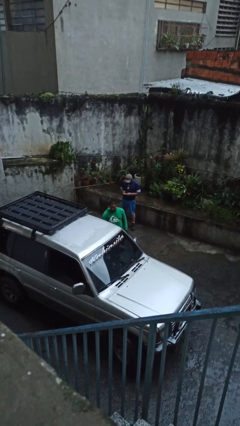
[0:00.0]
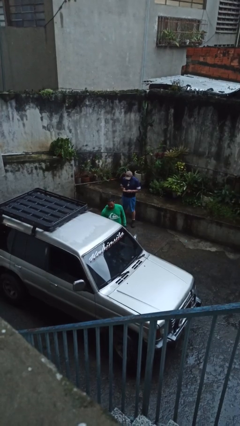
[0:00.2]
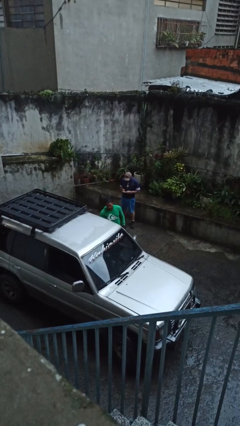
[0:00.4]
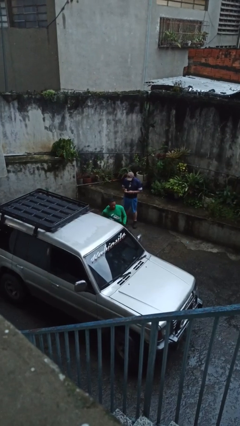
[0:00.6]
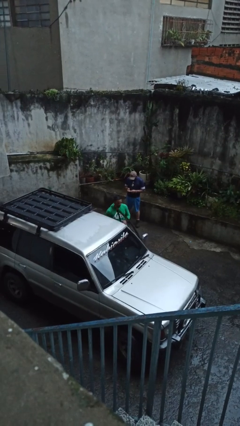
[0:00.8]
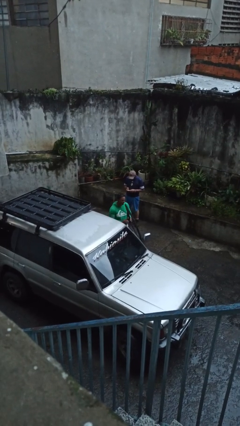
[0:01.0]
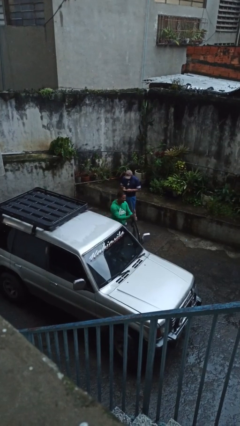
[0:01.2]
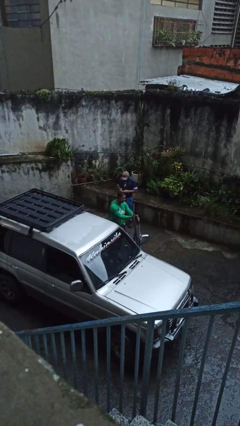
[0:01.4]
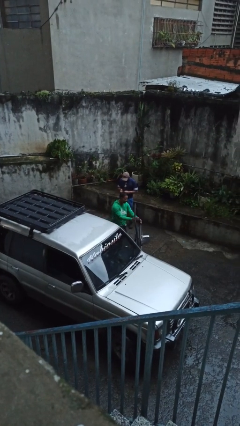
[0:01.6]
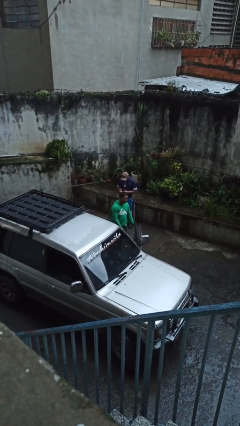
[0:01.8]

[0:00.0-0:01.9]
person opens car door

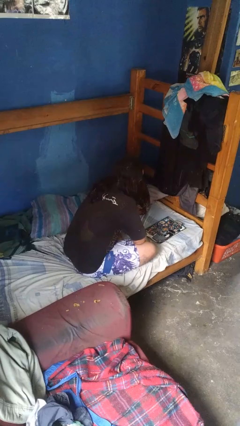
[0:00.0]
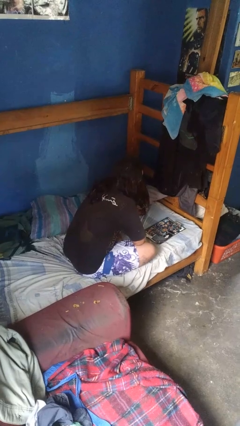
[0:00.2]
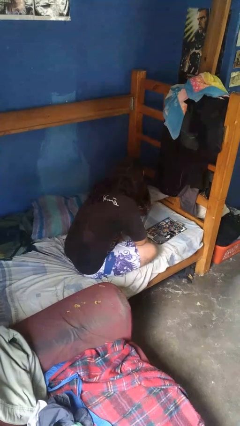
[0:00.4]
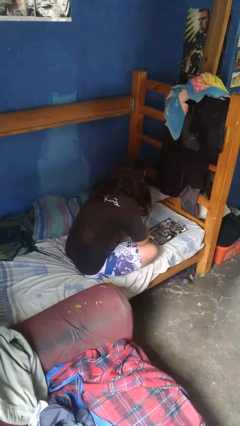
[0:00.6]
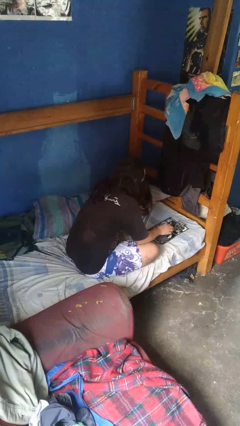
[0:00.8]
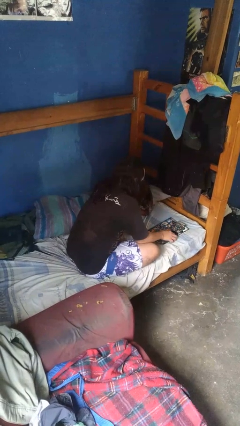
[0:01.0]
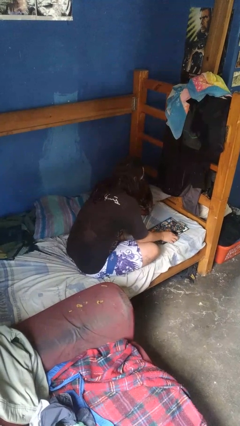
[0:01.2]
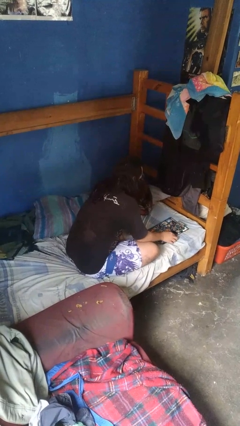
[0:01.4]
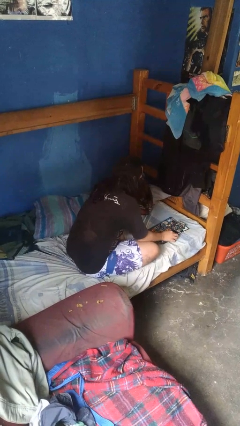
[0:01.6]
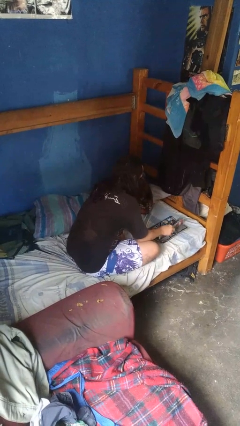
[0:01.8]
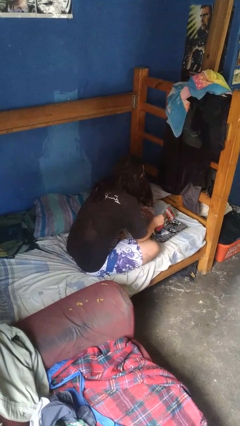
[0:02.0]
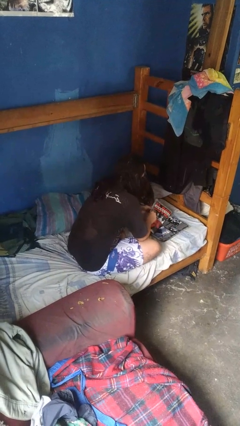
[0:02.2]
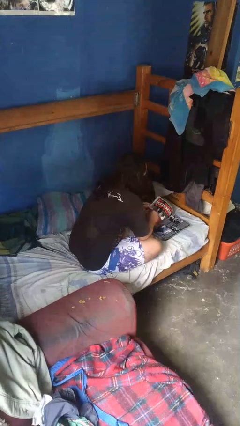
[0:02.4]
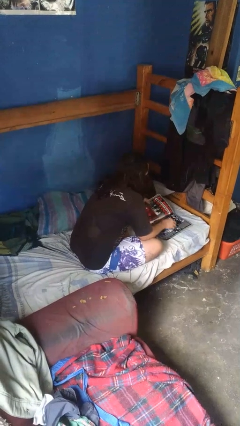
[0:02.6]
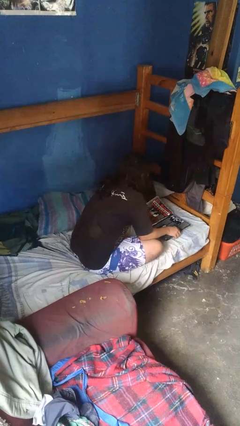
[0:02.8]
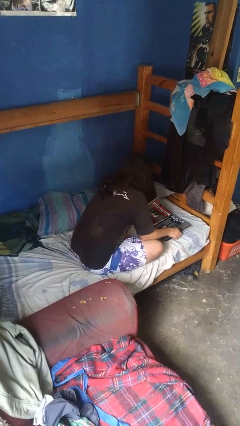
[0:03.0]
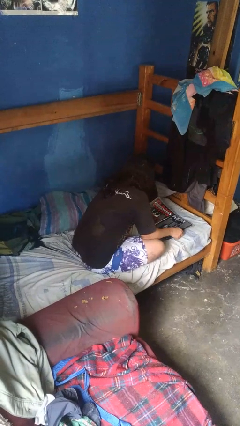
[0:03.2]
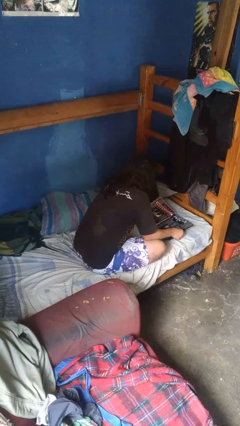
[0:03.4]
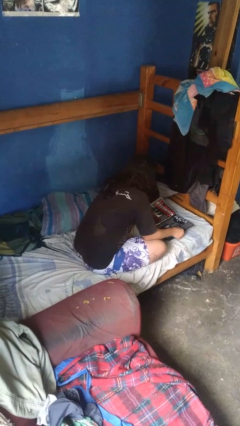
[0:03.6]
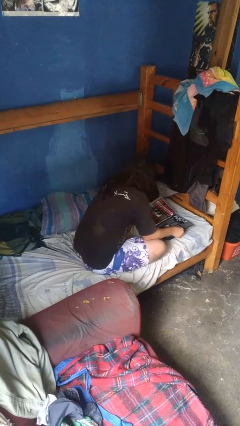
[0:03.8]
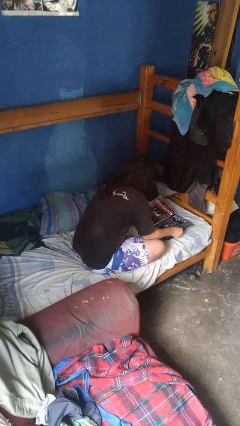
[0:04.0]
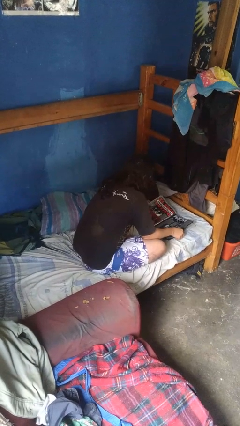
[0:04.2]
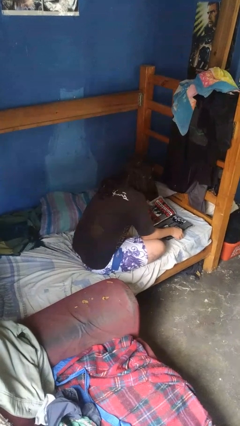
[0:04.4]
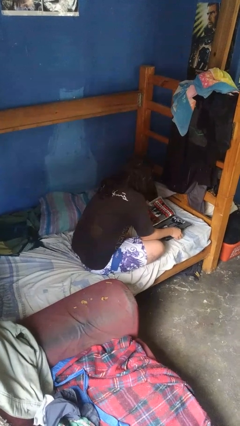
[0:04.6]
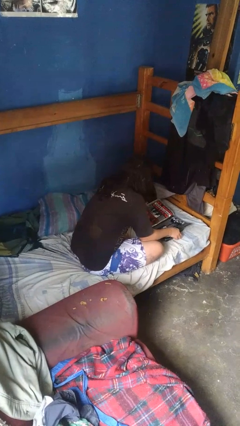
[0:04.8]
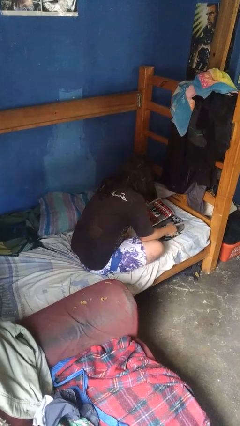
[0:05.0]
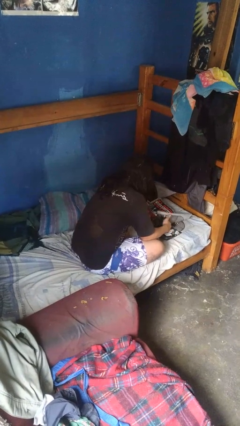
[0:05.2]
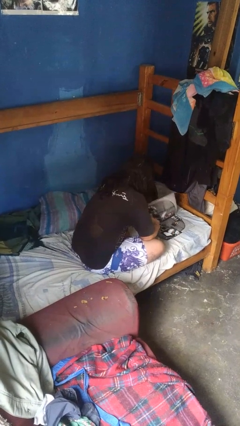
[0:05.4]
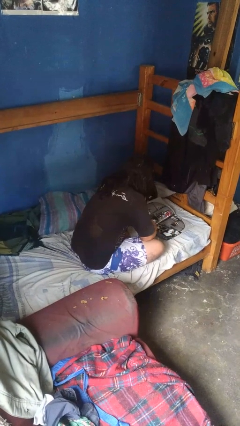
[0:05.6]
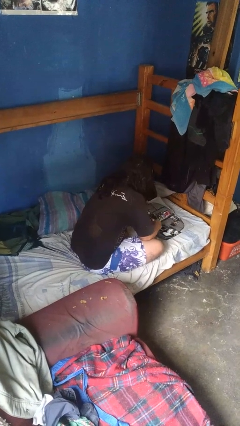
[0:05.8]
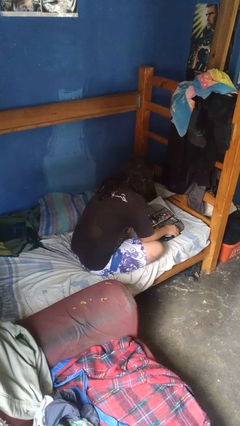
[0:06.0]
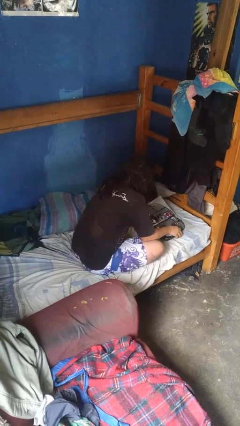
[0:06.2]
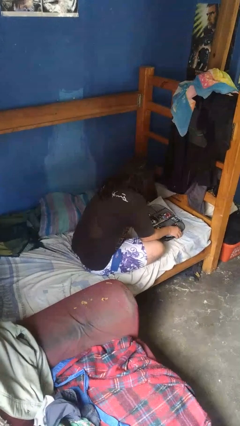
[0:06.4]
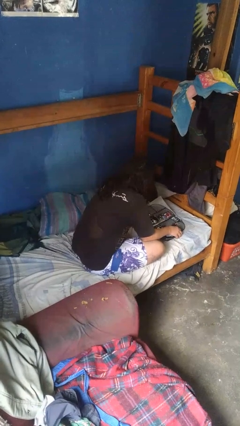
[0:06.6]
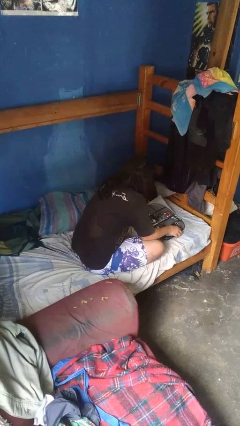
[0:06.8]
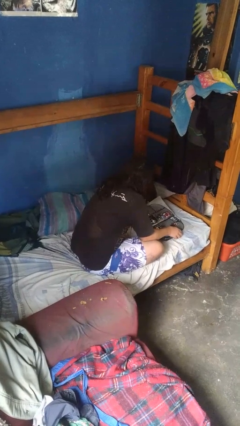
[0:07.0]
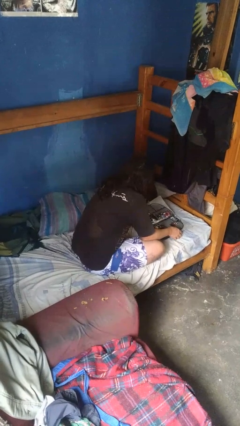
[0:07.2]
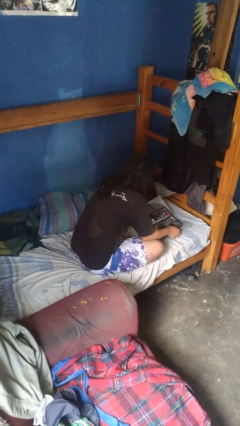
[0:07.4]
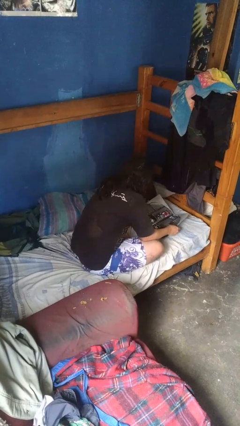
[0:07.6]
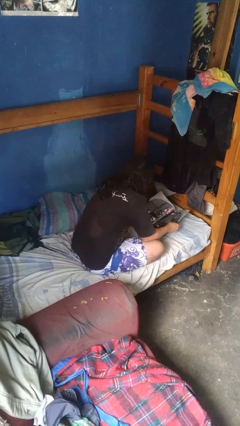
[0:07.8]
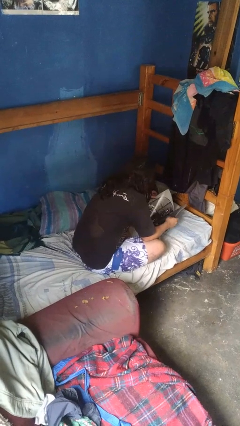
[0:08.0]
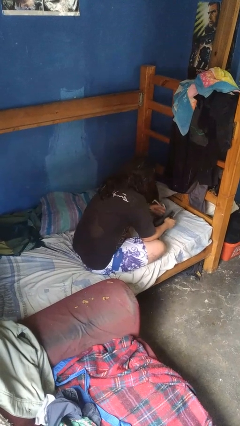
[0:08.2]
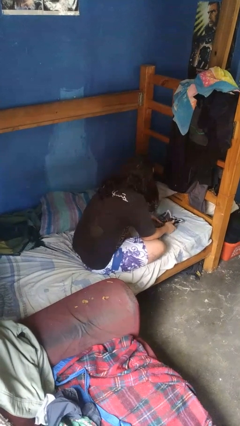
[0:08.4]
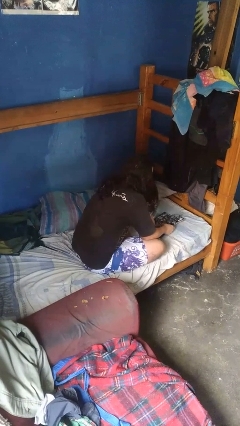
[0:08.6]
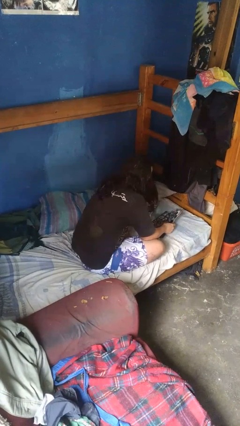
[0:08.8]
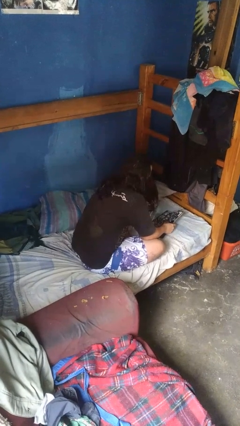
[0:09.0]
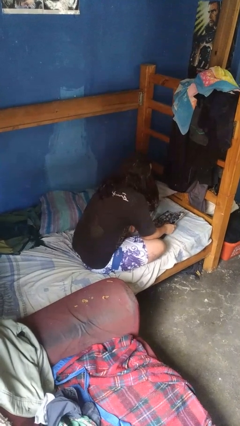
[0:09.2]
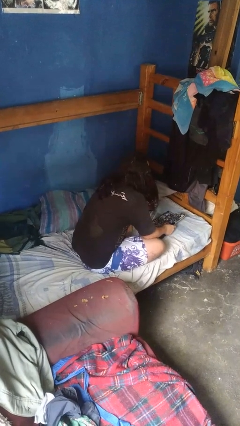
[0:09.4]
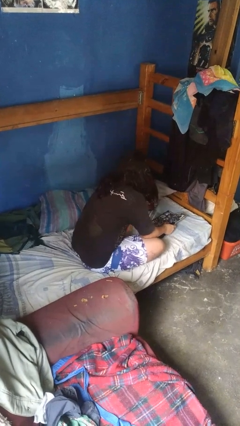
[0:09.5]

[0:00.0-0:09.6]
person reads magazine

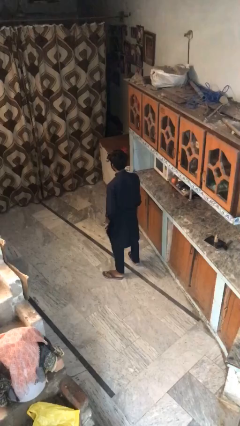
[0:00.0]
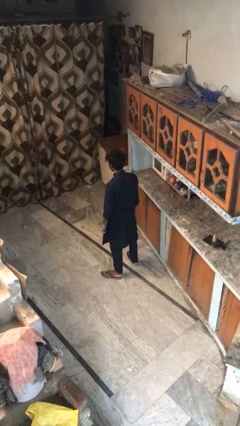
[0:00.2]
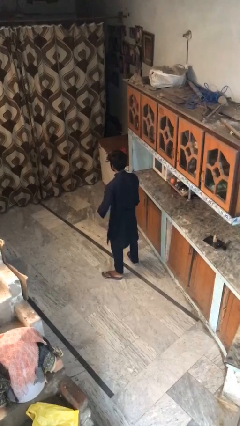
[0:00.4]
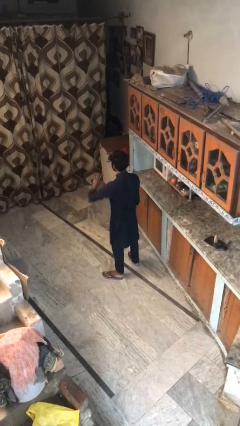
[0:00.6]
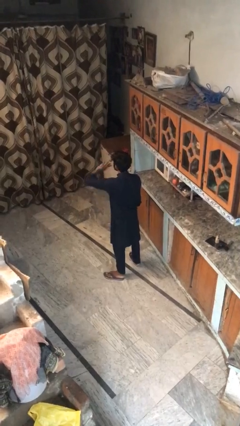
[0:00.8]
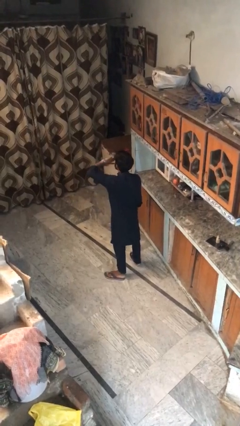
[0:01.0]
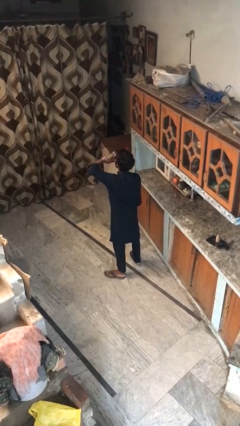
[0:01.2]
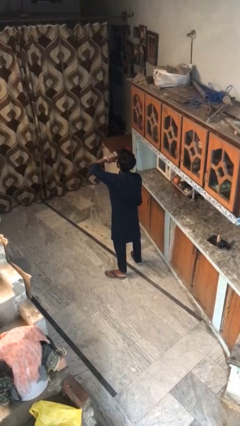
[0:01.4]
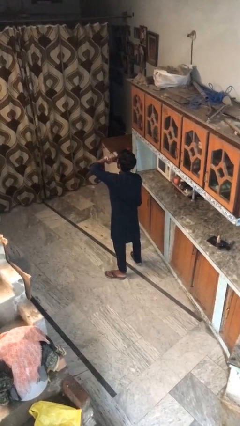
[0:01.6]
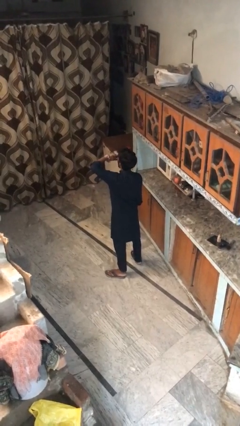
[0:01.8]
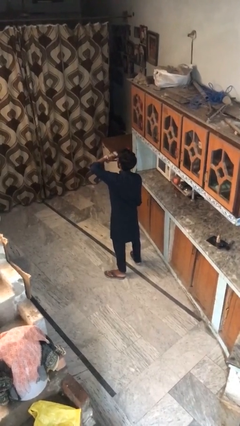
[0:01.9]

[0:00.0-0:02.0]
person yawns

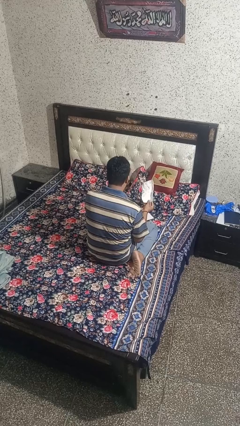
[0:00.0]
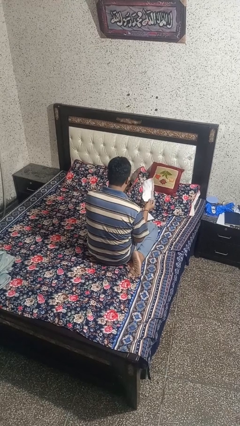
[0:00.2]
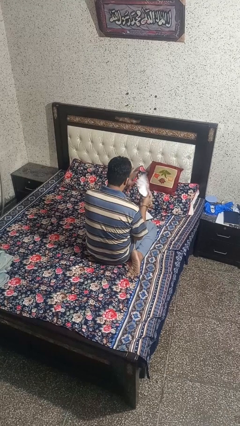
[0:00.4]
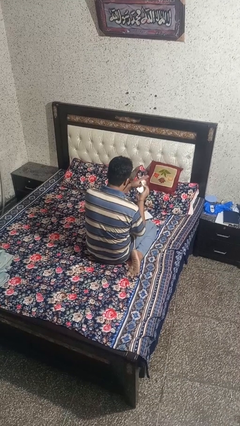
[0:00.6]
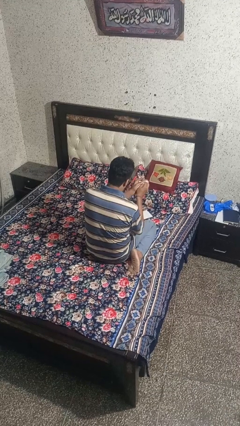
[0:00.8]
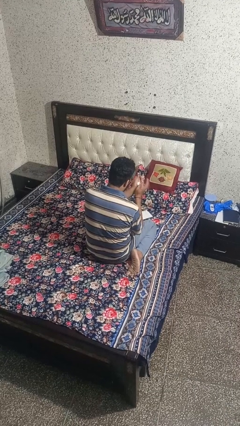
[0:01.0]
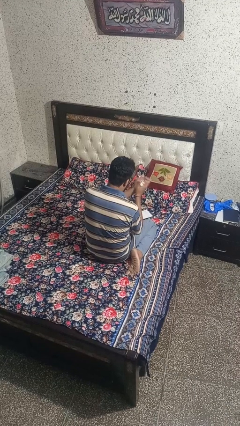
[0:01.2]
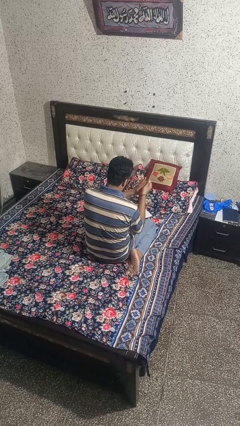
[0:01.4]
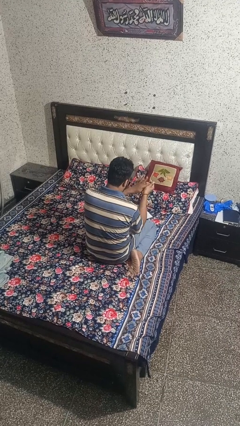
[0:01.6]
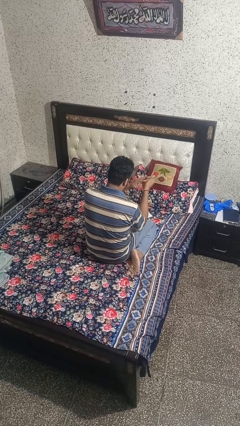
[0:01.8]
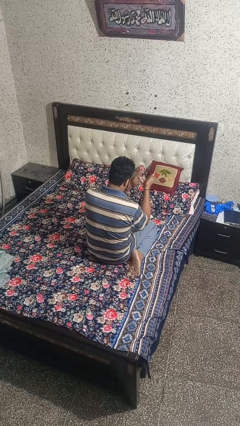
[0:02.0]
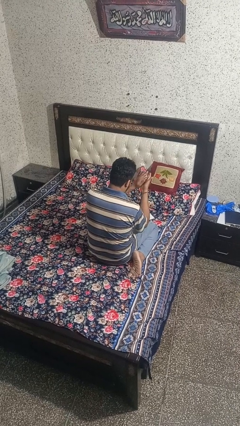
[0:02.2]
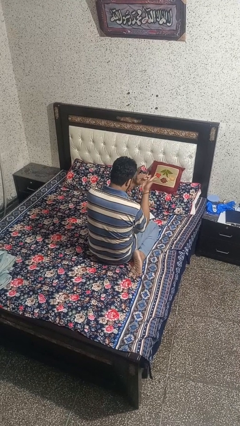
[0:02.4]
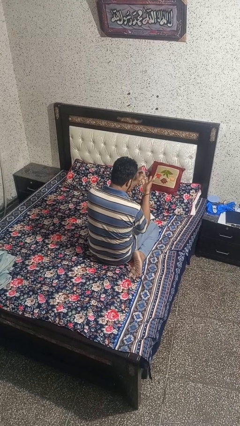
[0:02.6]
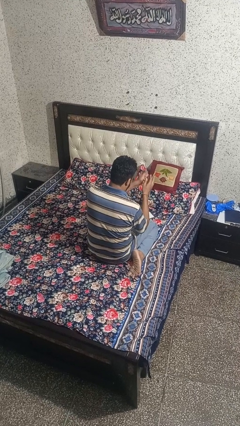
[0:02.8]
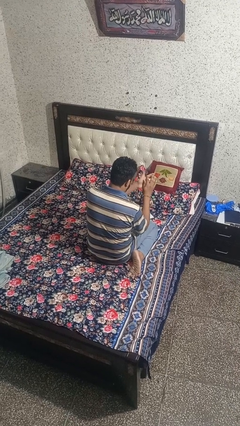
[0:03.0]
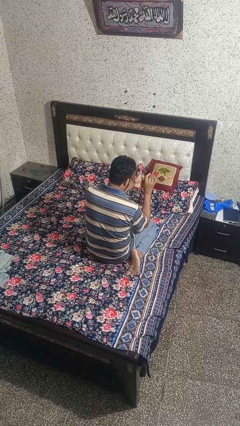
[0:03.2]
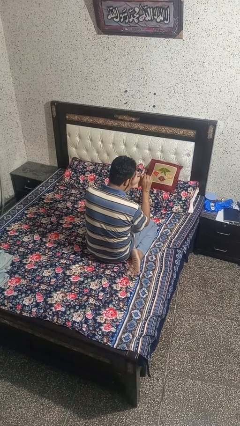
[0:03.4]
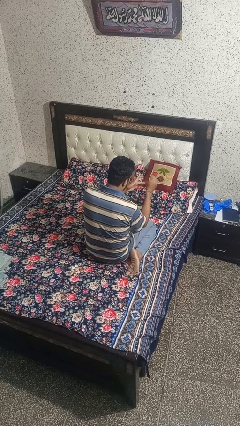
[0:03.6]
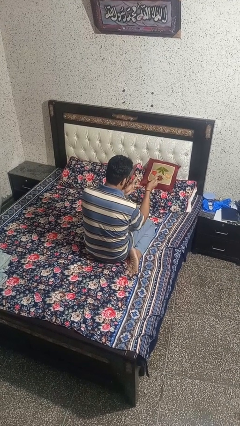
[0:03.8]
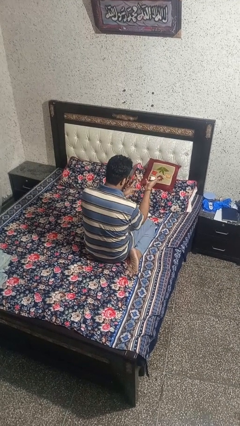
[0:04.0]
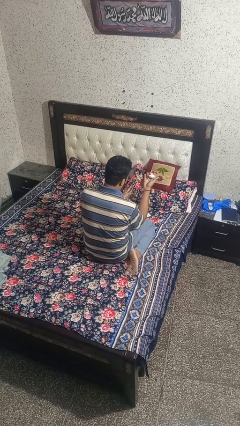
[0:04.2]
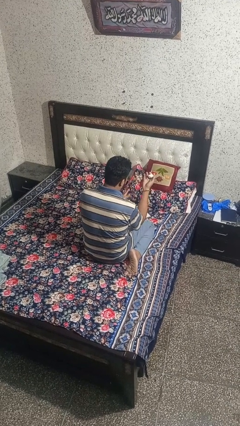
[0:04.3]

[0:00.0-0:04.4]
person crumples paper
